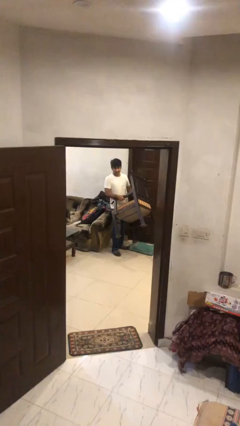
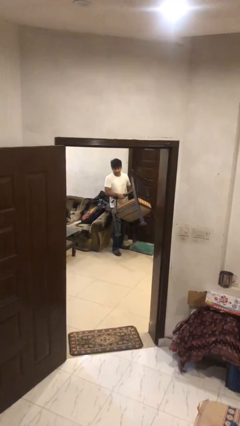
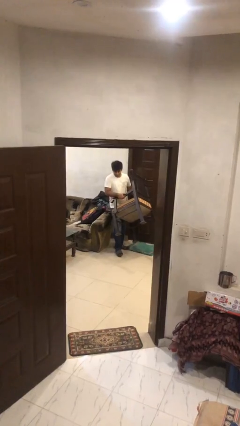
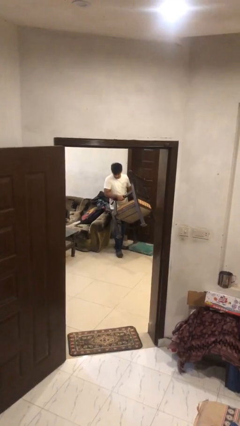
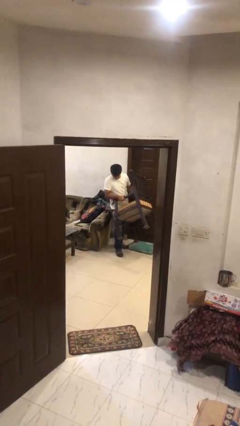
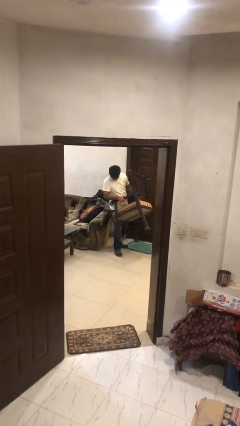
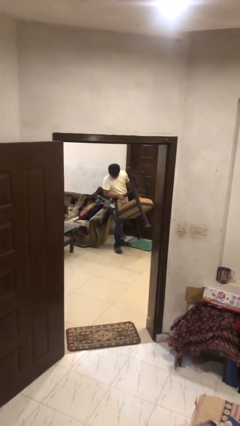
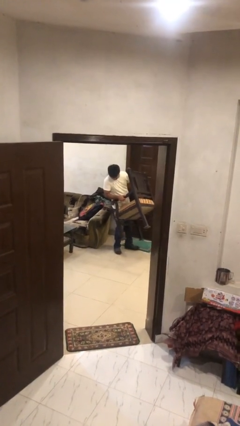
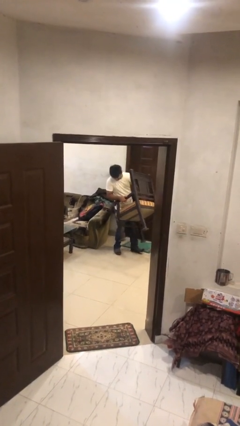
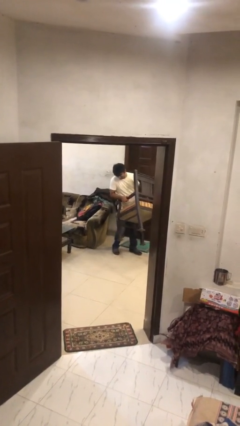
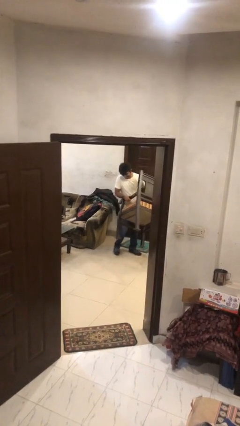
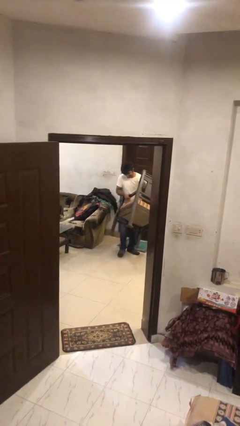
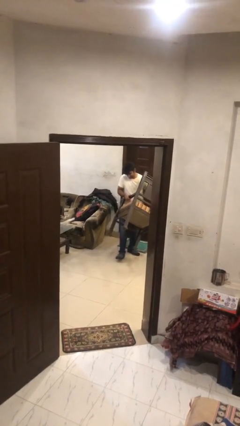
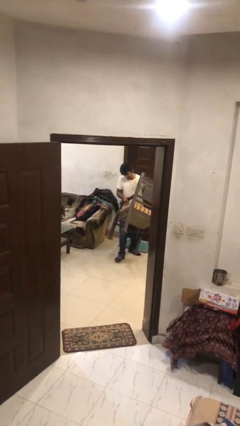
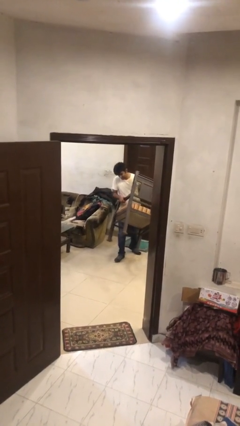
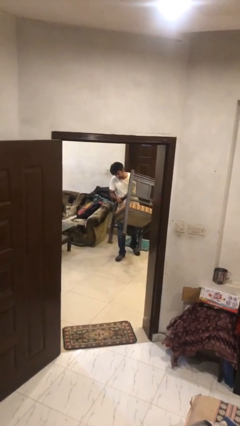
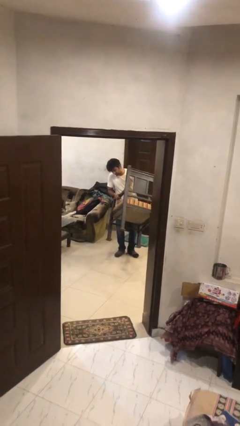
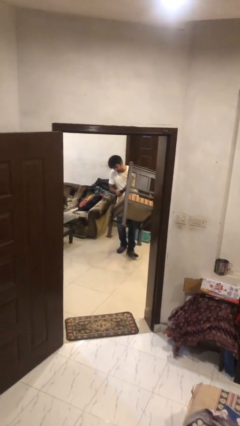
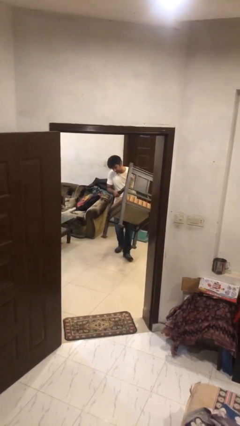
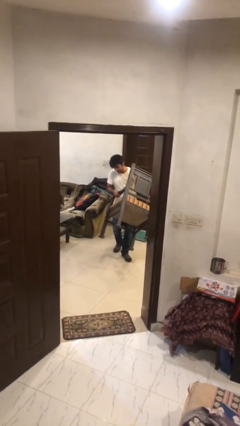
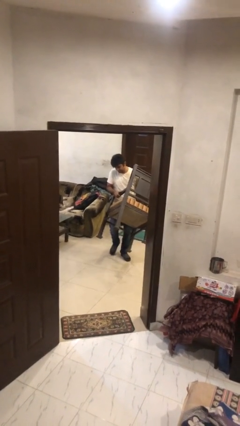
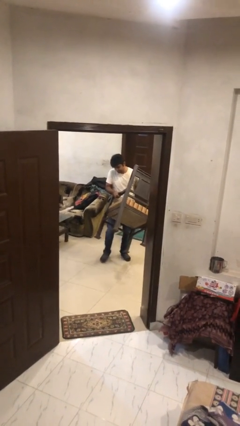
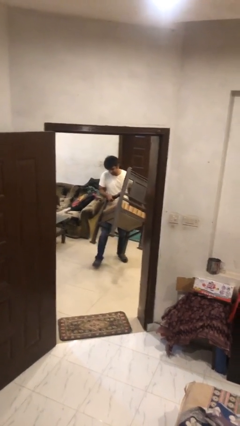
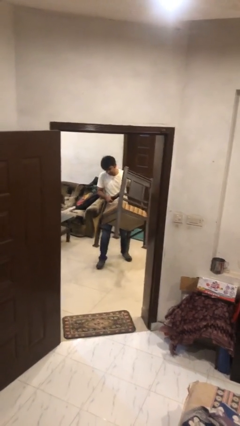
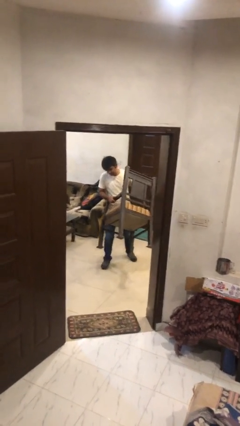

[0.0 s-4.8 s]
person carries heavy object

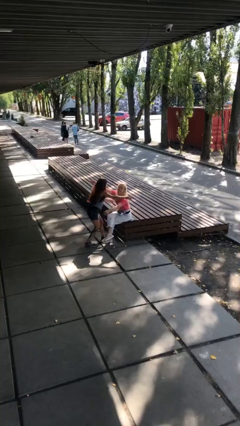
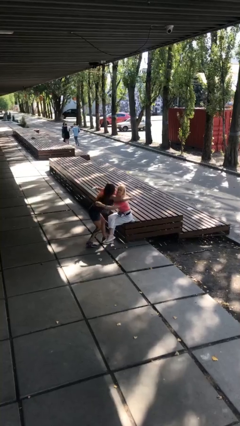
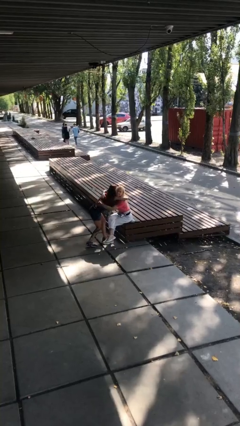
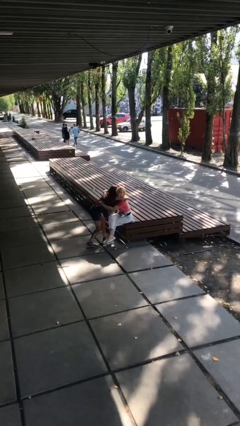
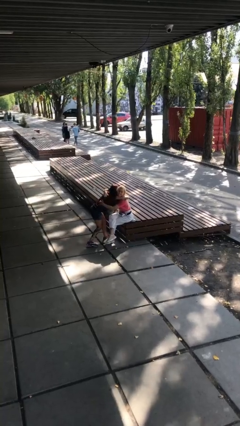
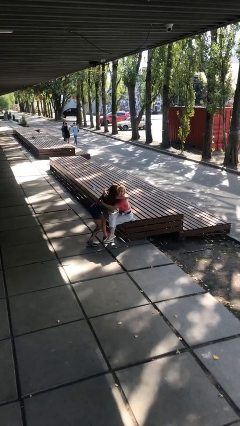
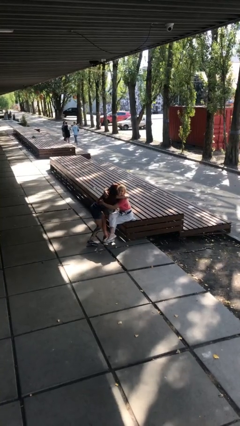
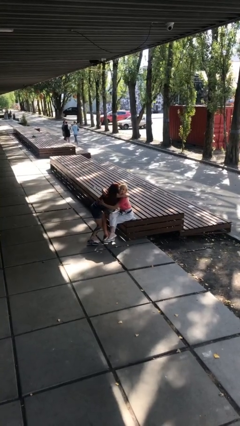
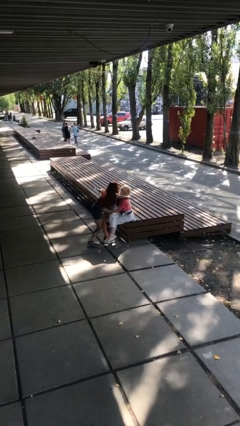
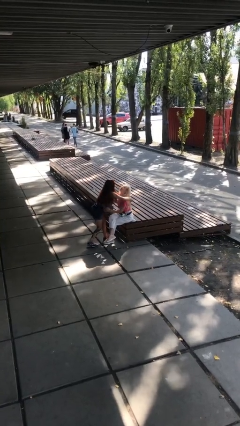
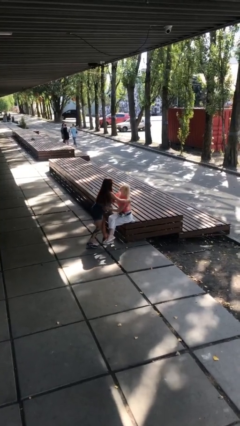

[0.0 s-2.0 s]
person embraces person

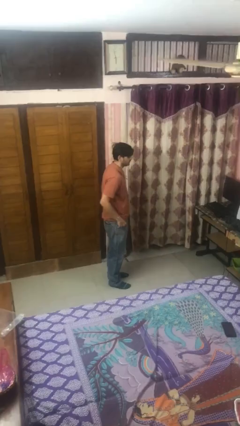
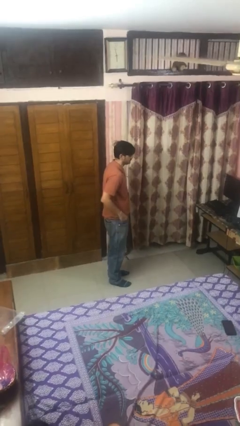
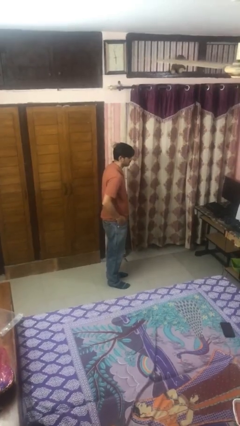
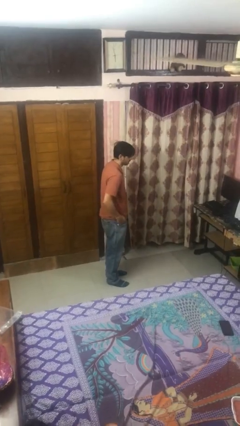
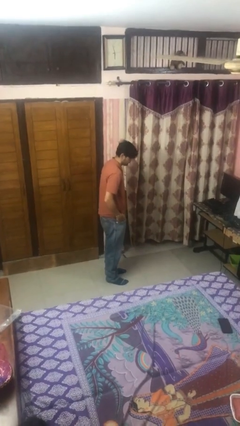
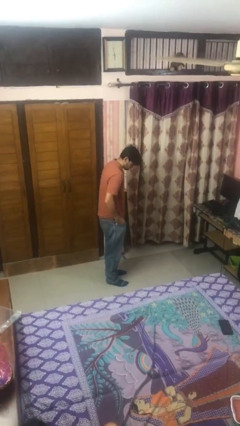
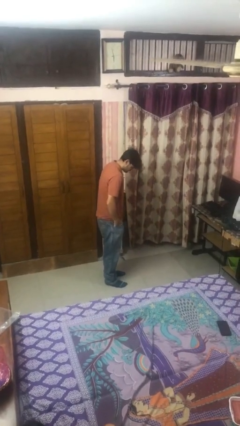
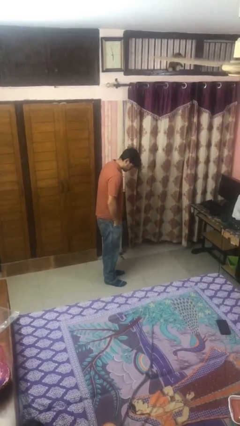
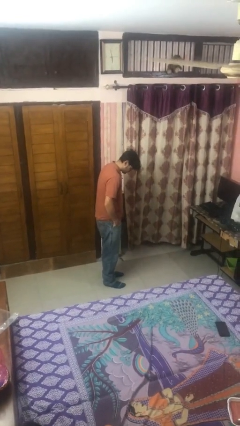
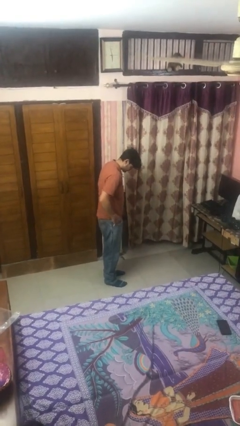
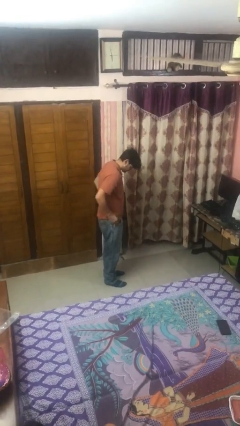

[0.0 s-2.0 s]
person puts hands in back pockets

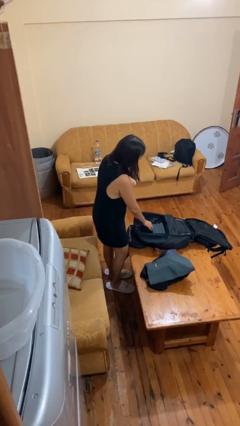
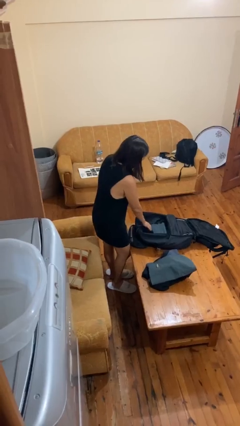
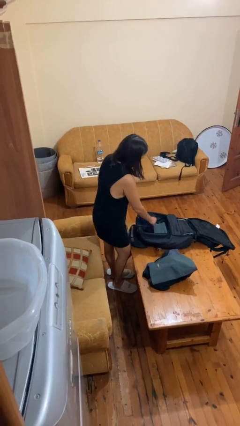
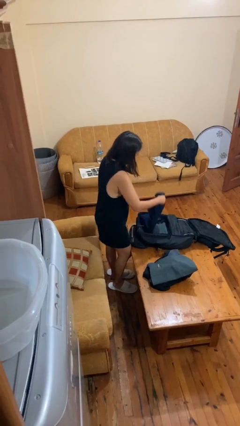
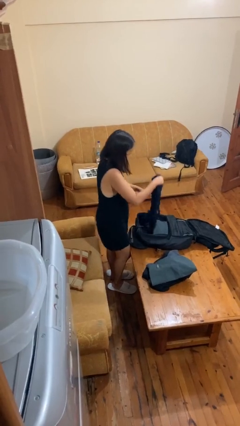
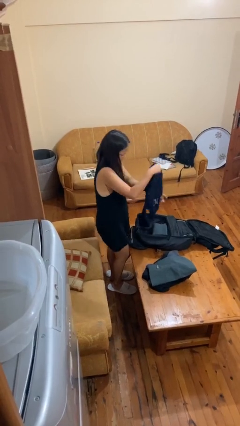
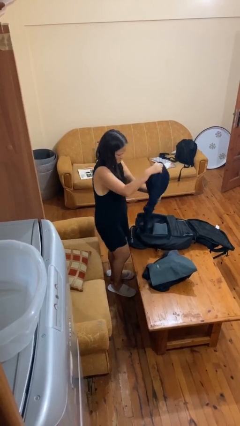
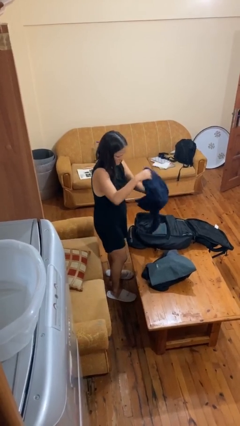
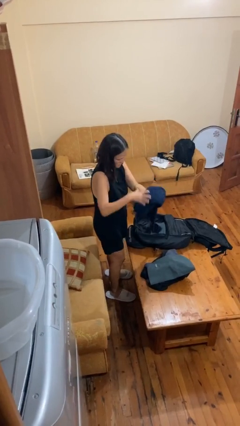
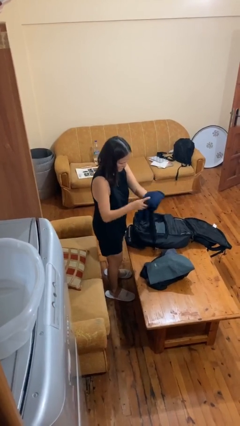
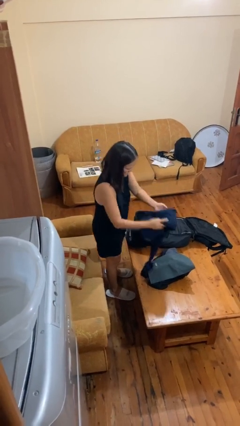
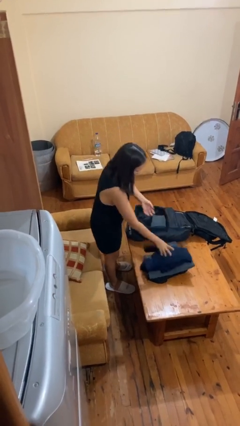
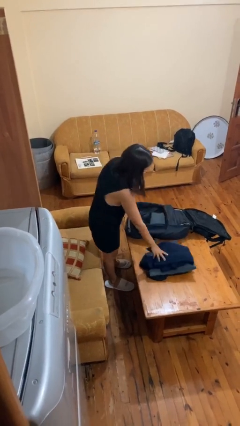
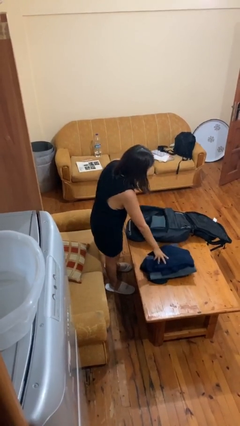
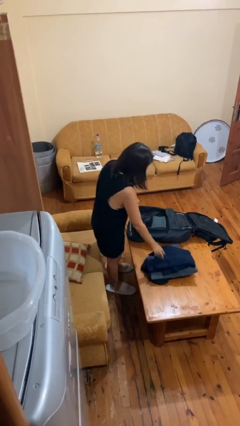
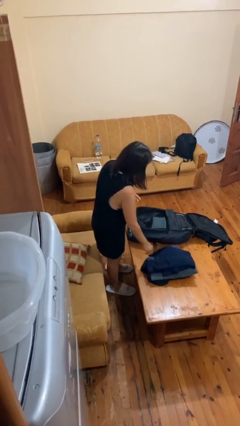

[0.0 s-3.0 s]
person unloads clothes from suitcase

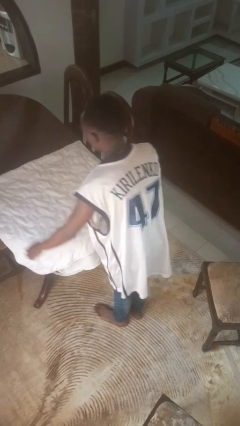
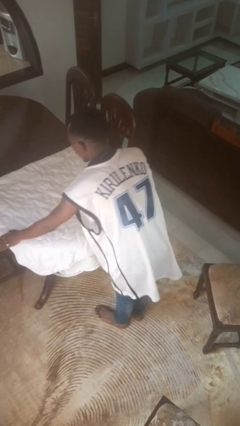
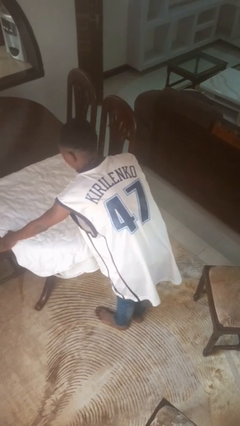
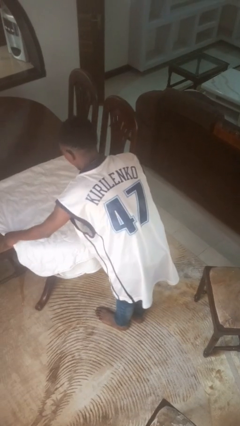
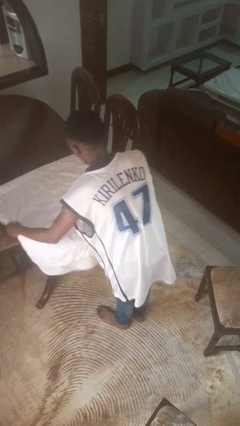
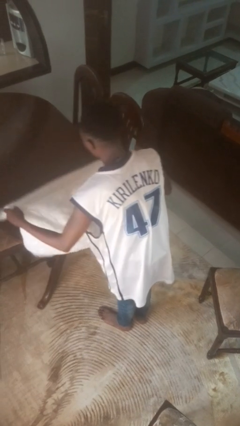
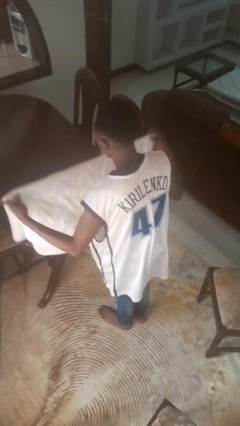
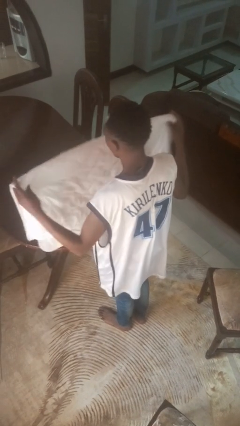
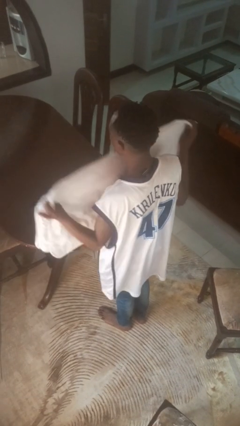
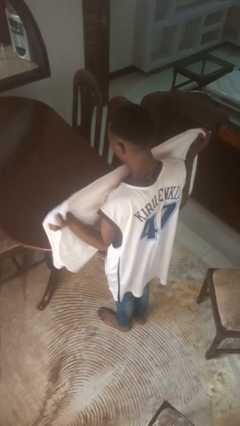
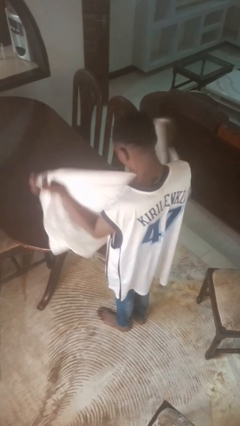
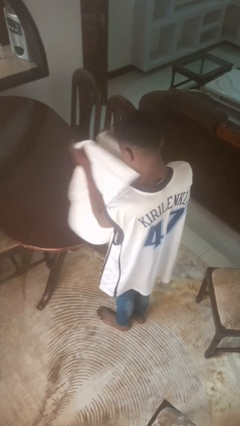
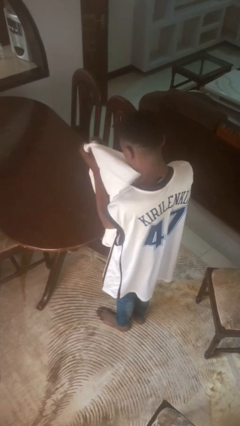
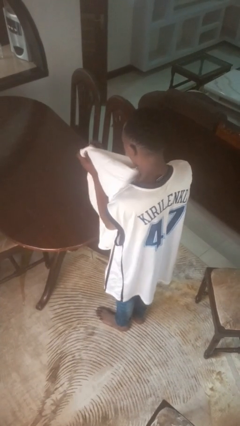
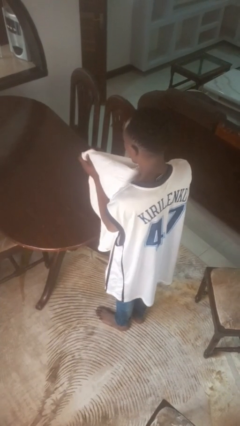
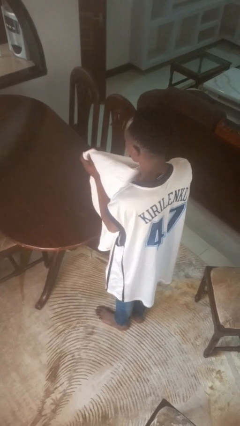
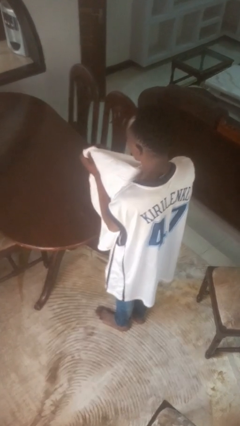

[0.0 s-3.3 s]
person folds tablecloth

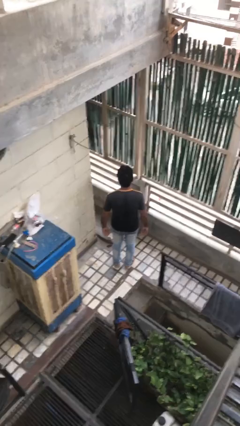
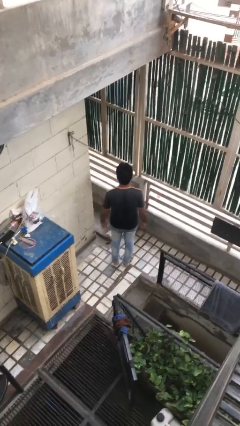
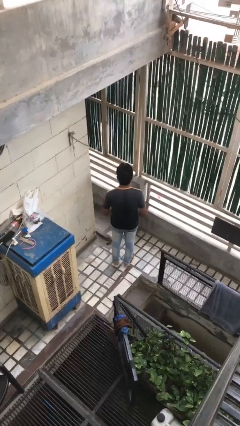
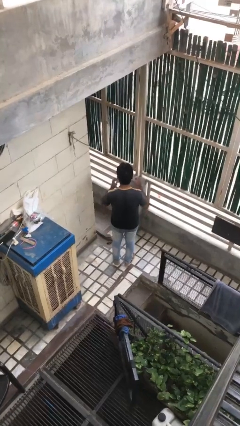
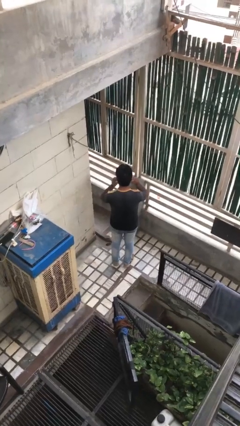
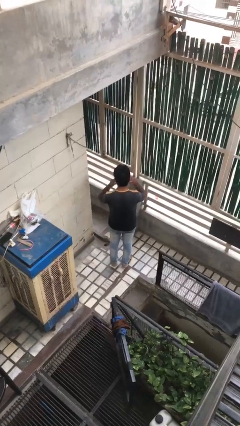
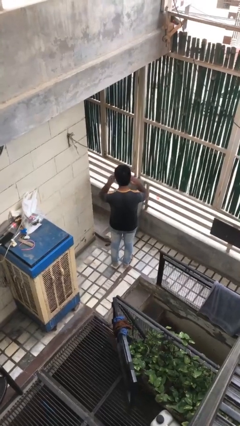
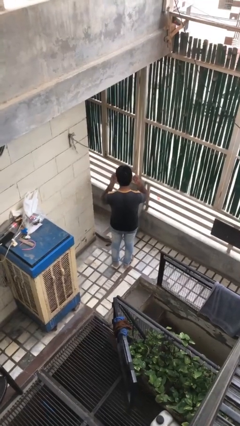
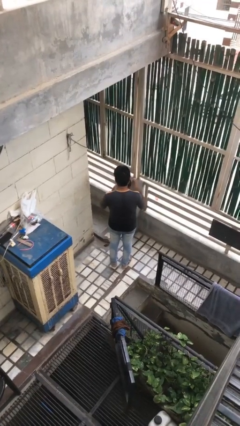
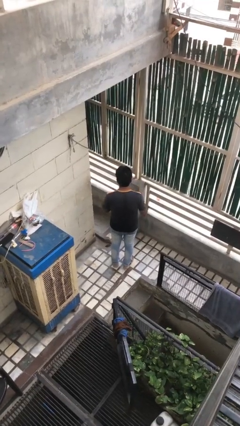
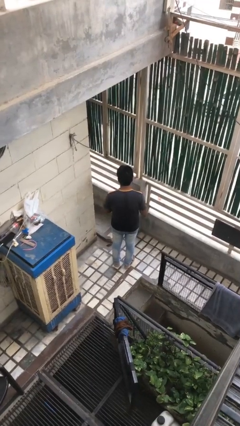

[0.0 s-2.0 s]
person takes off facemask
